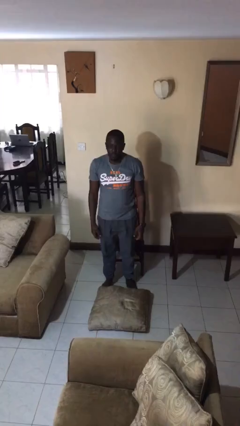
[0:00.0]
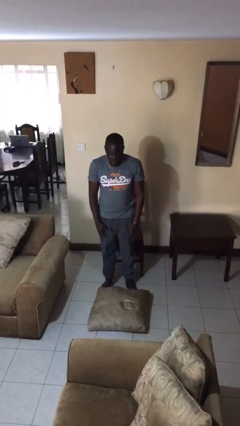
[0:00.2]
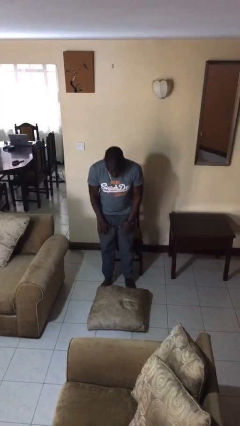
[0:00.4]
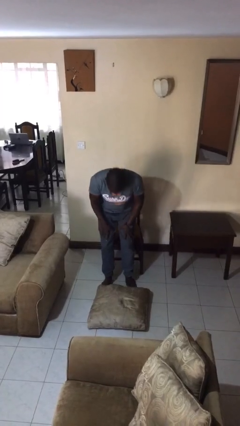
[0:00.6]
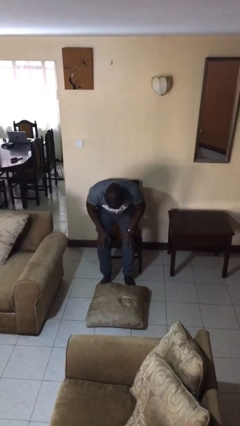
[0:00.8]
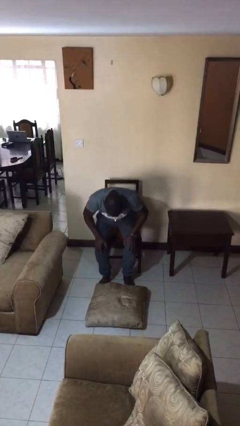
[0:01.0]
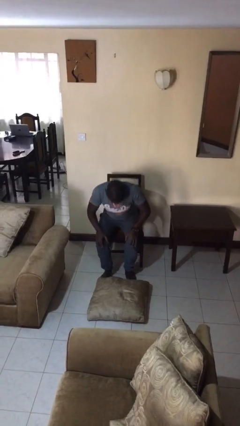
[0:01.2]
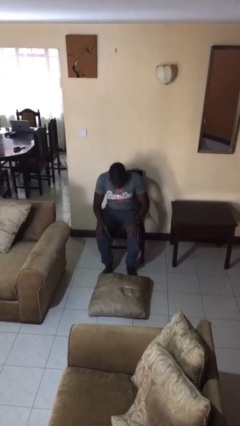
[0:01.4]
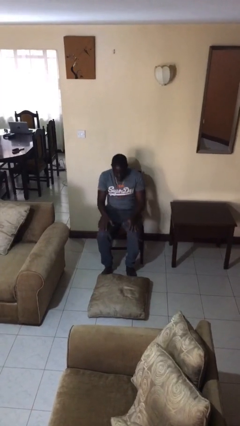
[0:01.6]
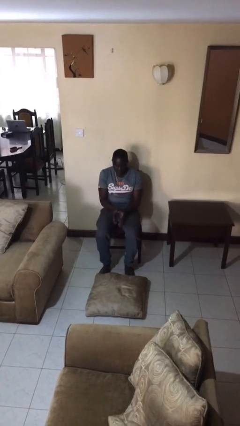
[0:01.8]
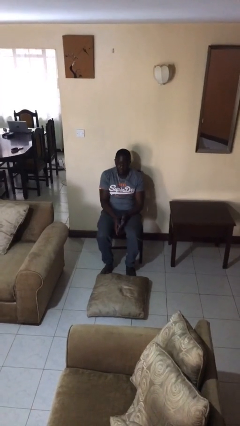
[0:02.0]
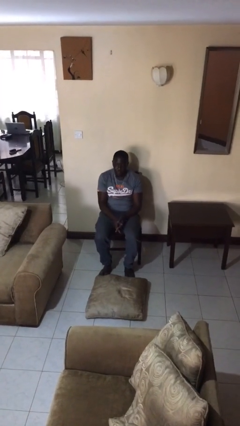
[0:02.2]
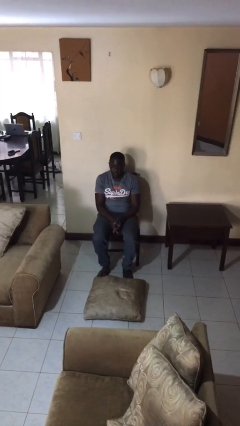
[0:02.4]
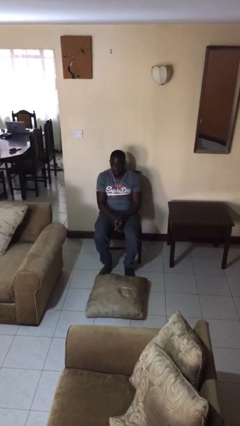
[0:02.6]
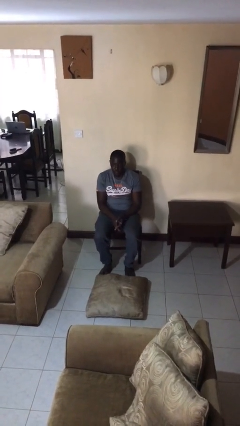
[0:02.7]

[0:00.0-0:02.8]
person sits down

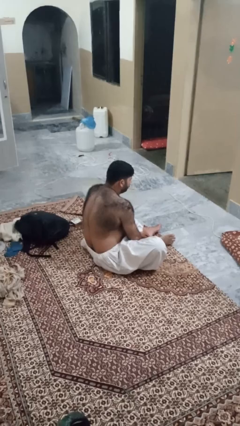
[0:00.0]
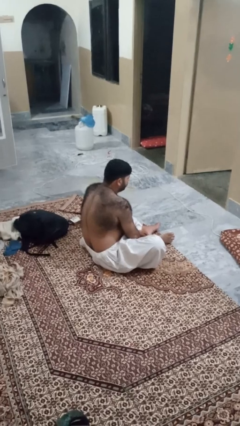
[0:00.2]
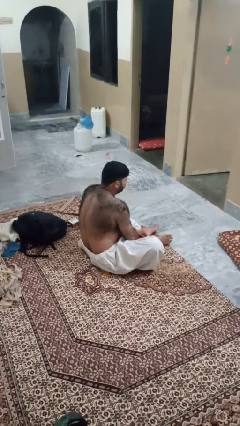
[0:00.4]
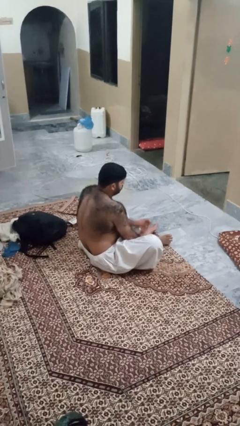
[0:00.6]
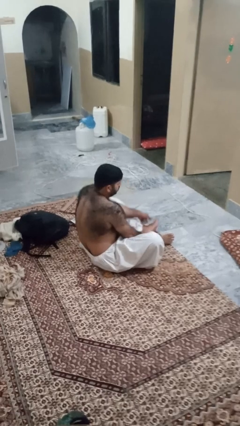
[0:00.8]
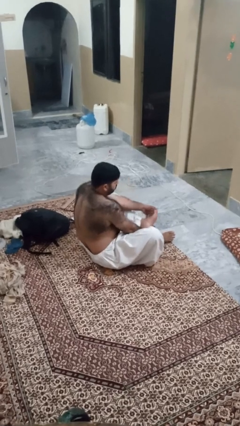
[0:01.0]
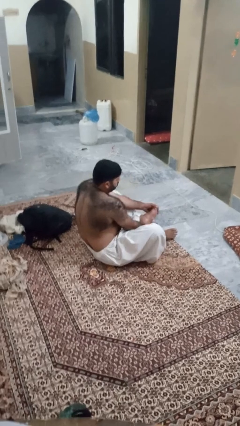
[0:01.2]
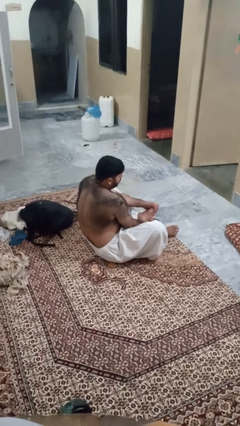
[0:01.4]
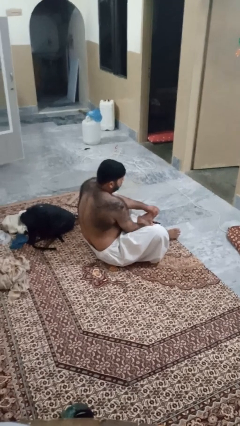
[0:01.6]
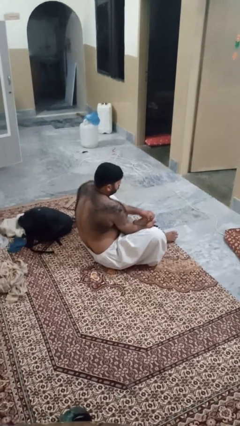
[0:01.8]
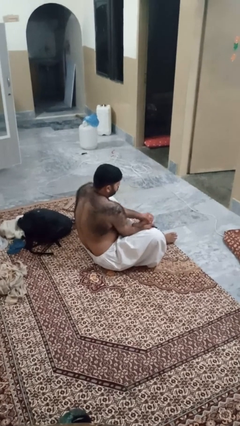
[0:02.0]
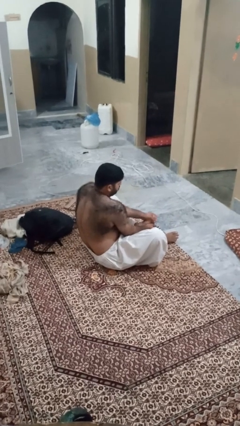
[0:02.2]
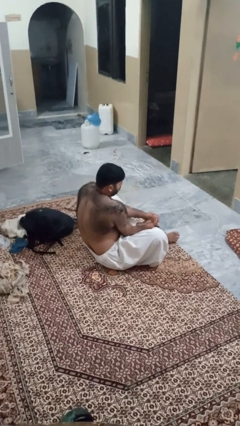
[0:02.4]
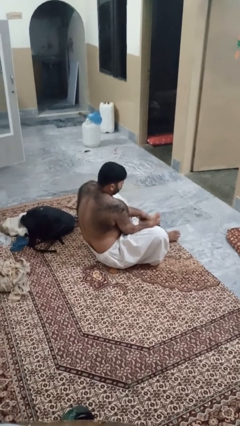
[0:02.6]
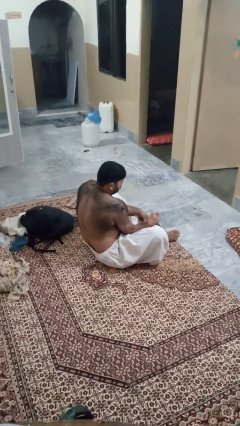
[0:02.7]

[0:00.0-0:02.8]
person rubs foot

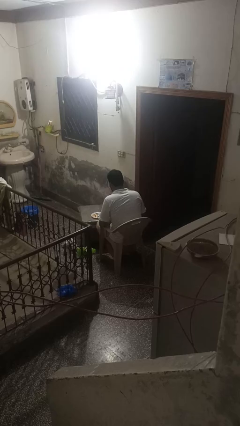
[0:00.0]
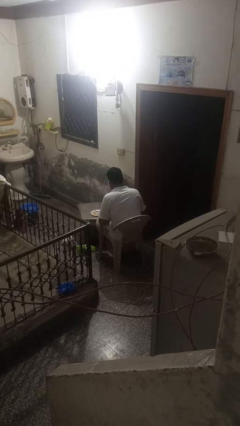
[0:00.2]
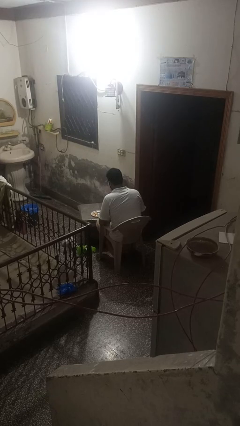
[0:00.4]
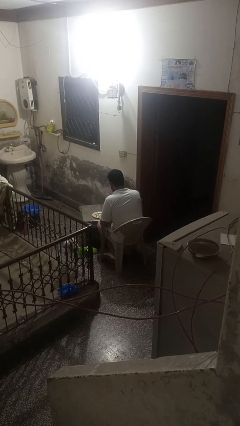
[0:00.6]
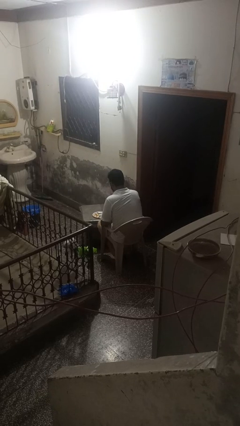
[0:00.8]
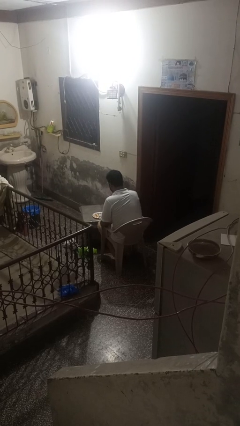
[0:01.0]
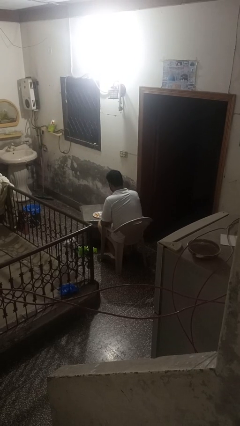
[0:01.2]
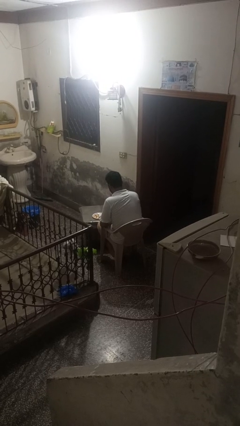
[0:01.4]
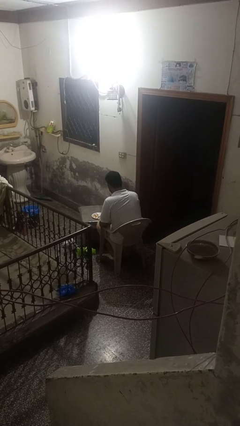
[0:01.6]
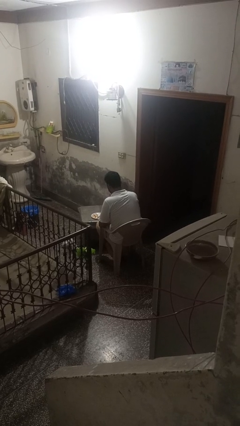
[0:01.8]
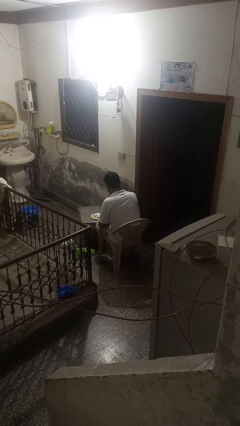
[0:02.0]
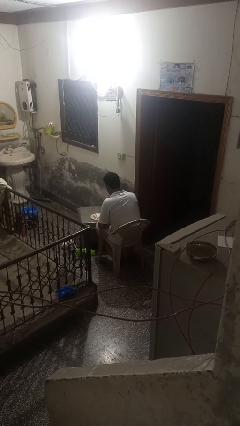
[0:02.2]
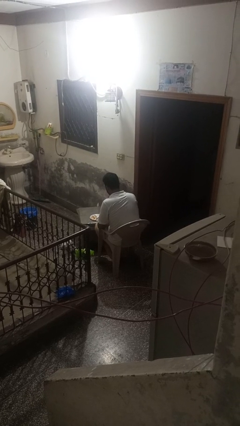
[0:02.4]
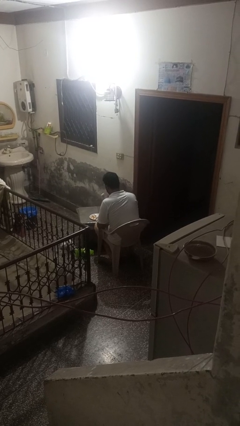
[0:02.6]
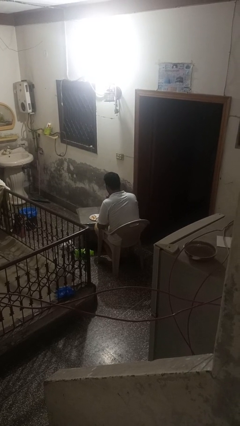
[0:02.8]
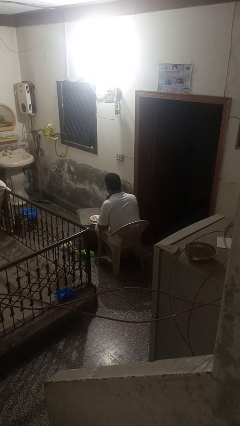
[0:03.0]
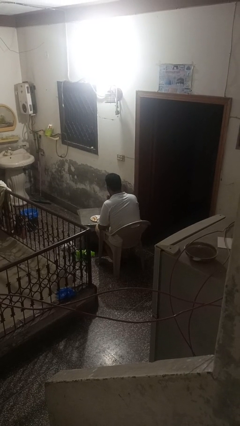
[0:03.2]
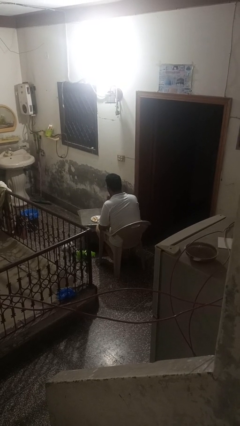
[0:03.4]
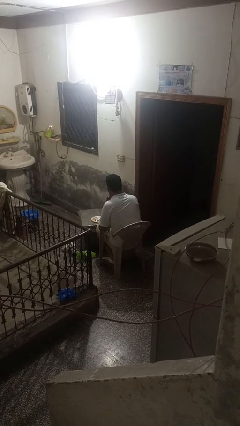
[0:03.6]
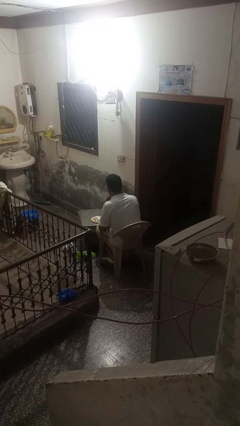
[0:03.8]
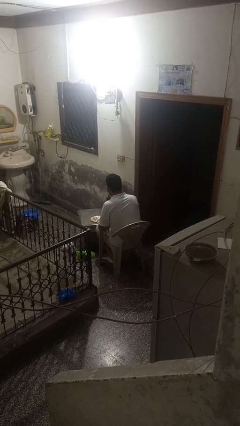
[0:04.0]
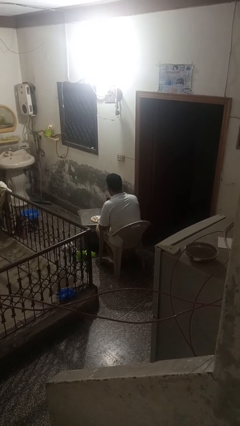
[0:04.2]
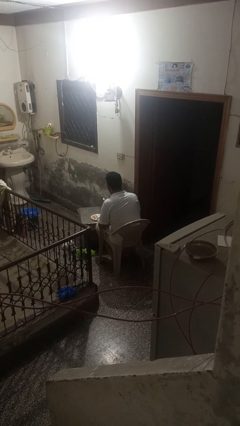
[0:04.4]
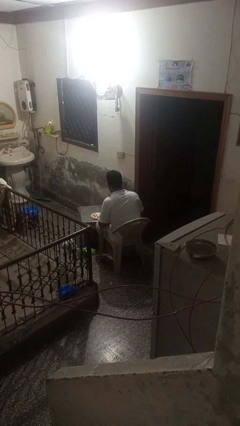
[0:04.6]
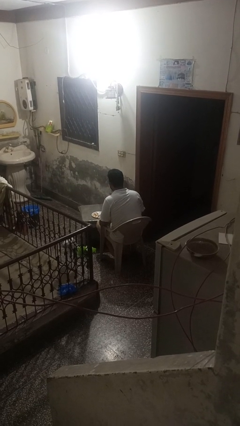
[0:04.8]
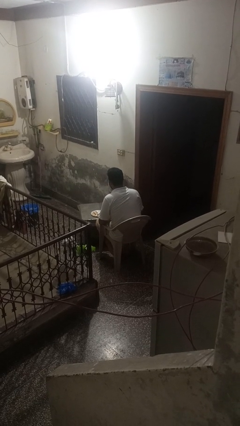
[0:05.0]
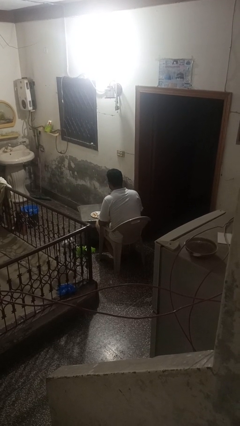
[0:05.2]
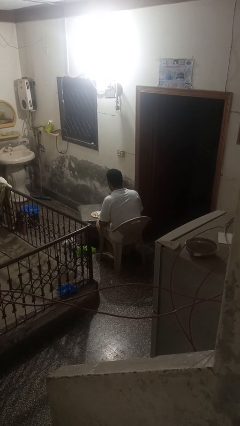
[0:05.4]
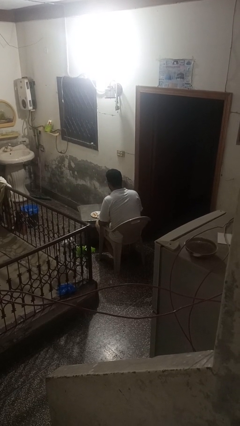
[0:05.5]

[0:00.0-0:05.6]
person eats with utensil

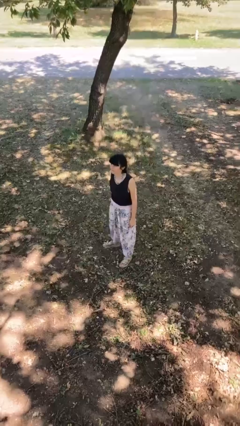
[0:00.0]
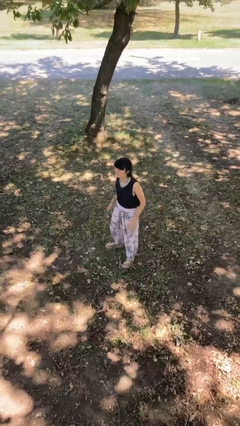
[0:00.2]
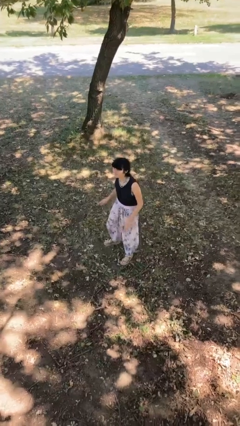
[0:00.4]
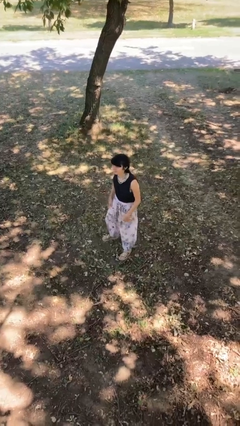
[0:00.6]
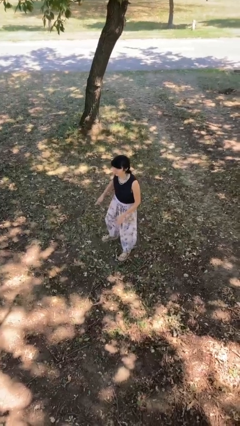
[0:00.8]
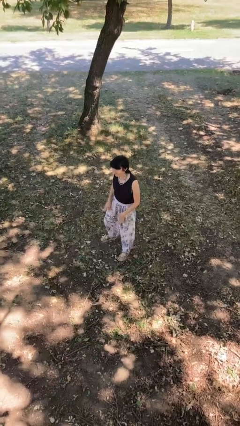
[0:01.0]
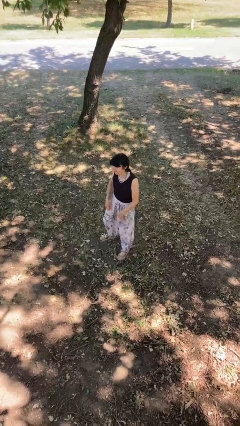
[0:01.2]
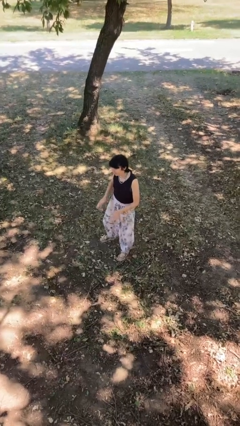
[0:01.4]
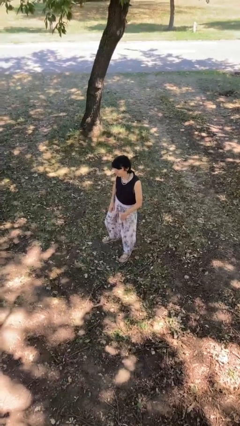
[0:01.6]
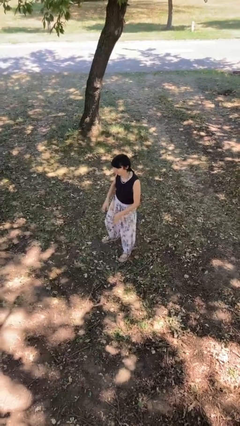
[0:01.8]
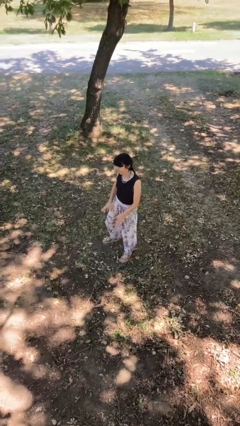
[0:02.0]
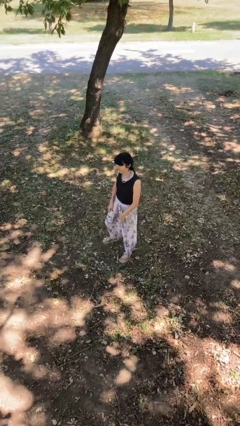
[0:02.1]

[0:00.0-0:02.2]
person slaps hands on thighs

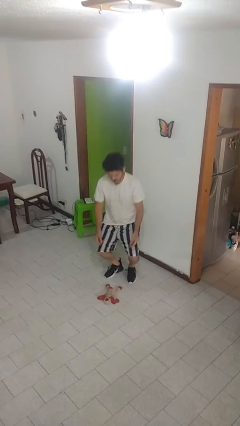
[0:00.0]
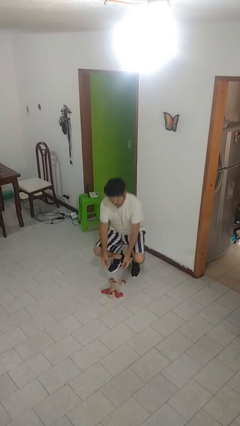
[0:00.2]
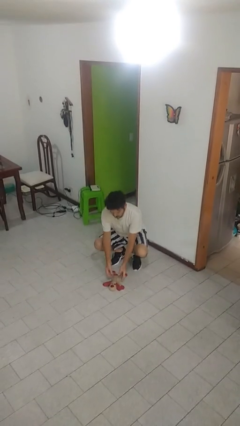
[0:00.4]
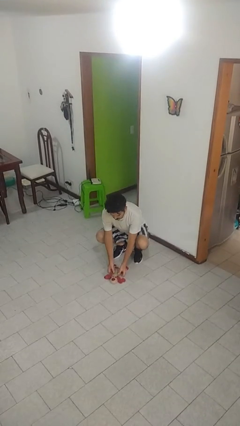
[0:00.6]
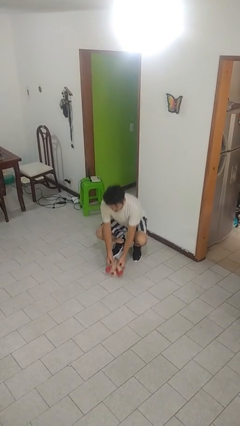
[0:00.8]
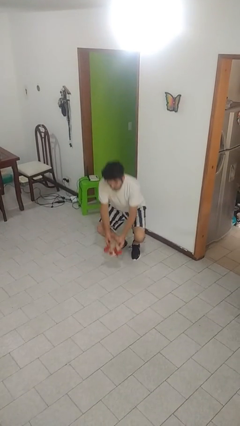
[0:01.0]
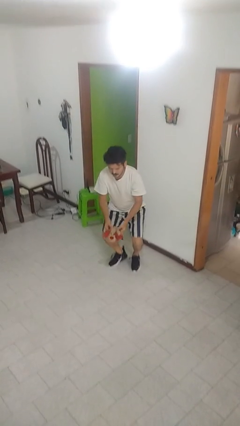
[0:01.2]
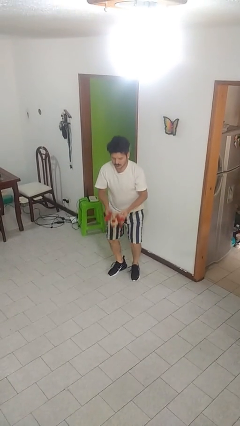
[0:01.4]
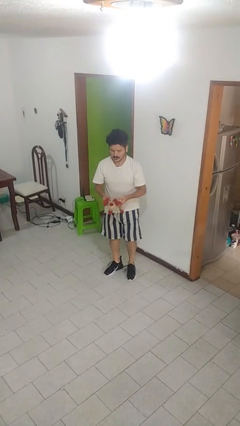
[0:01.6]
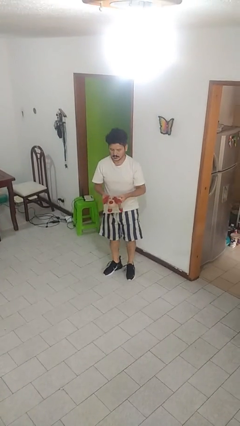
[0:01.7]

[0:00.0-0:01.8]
person picks up object from floor

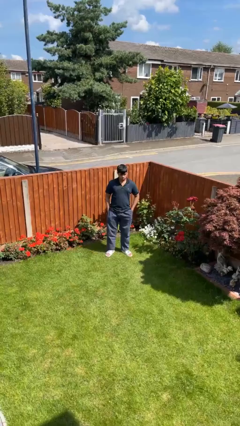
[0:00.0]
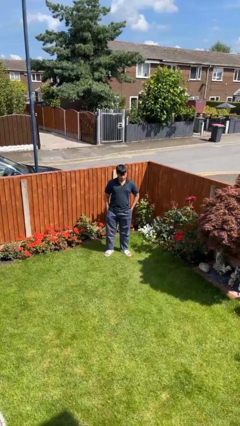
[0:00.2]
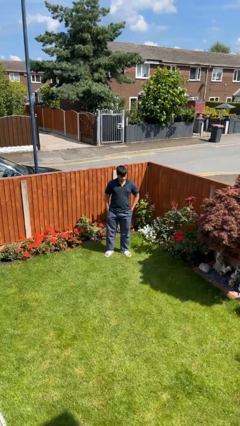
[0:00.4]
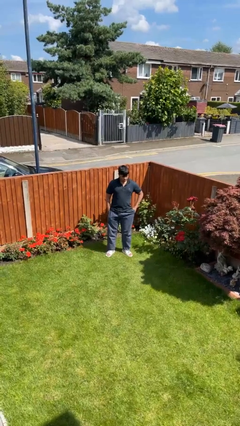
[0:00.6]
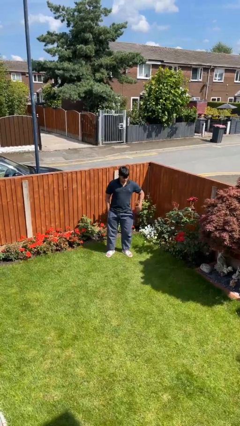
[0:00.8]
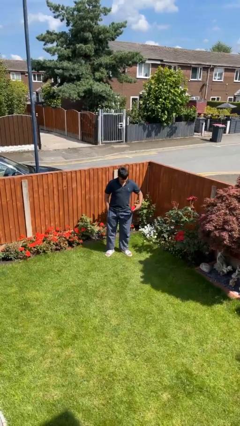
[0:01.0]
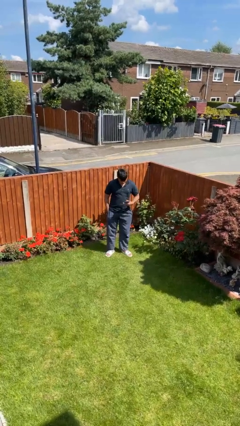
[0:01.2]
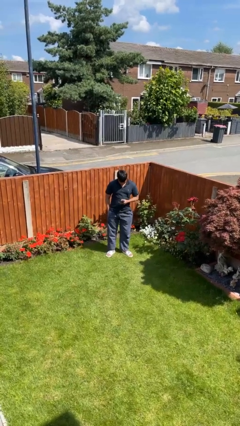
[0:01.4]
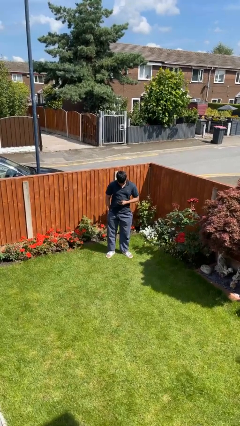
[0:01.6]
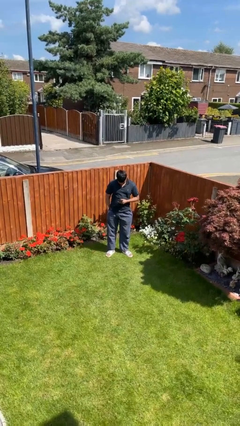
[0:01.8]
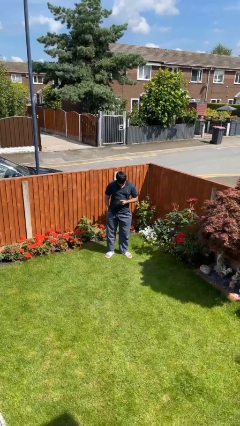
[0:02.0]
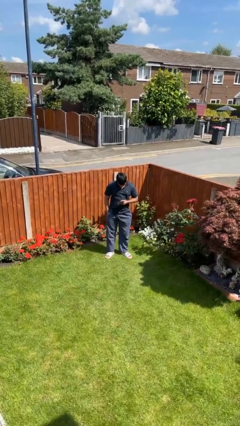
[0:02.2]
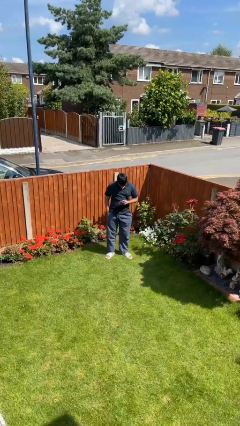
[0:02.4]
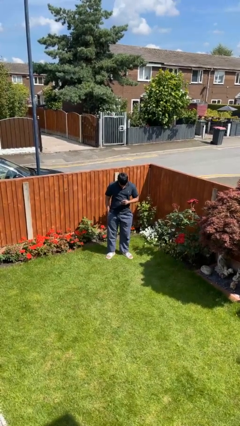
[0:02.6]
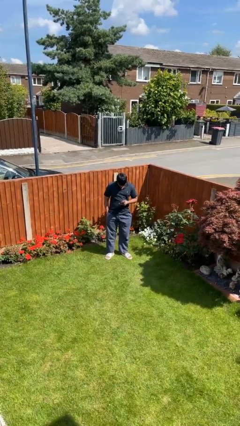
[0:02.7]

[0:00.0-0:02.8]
person takes phone from pocket
